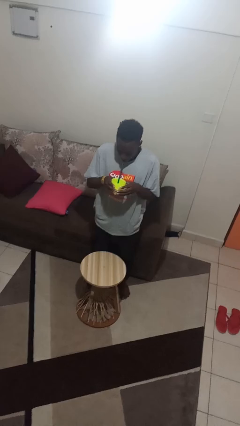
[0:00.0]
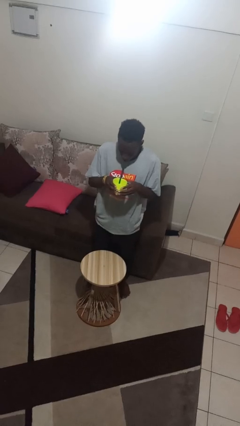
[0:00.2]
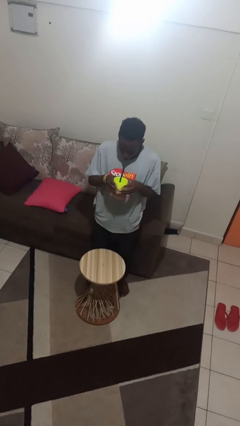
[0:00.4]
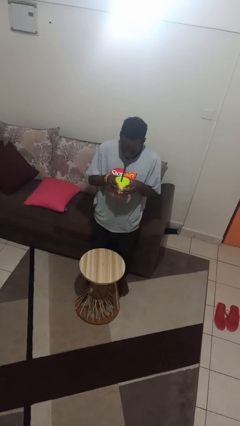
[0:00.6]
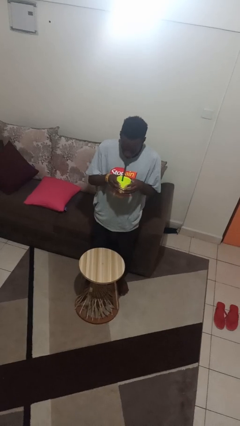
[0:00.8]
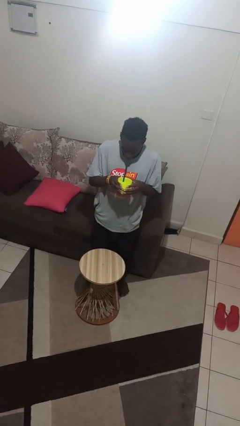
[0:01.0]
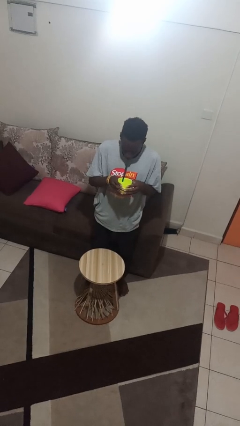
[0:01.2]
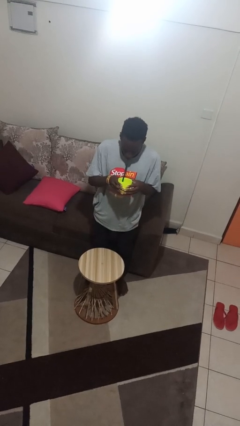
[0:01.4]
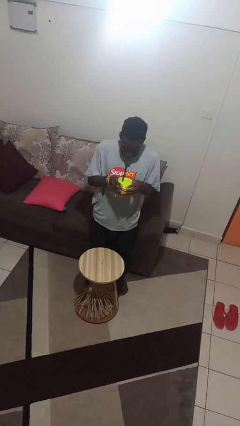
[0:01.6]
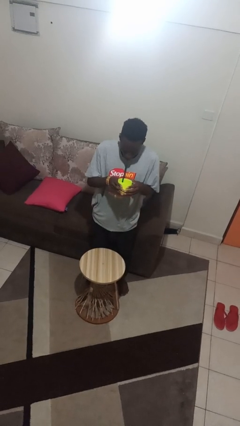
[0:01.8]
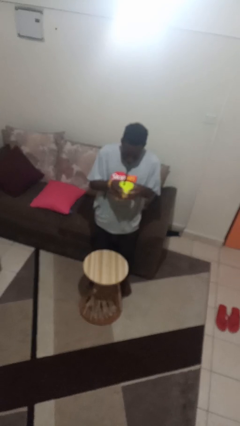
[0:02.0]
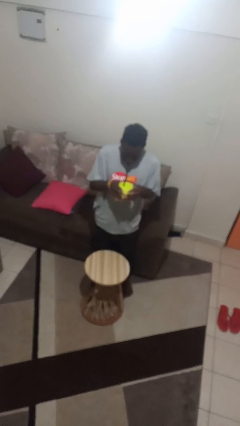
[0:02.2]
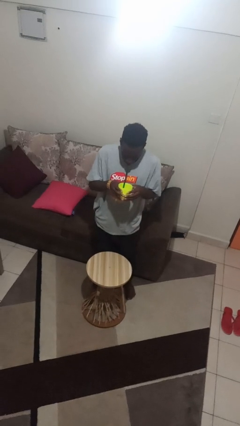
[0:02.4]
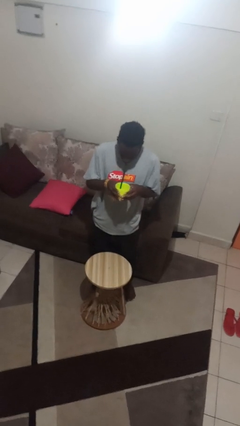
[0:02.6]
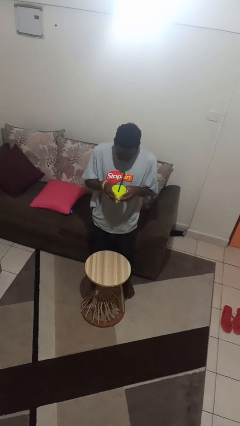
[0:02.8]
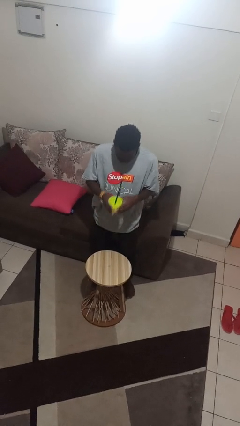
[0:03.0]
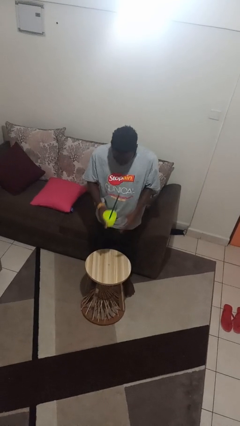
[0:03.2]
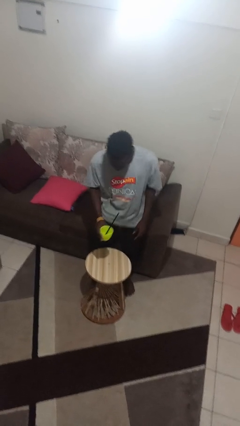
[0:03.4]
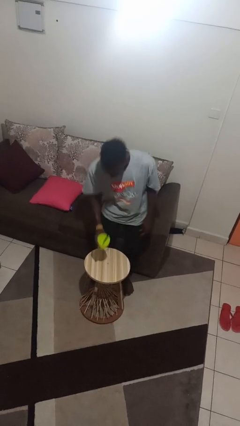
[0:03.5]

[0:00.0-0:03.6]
person drinks from straw

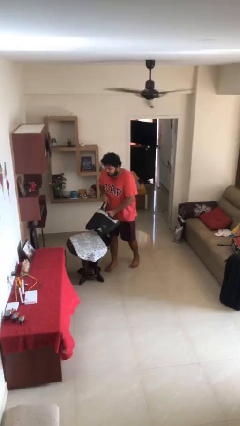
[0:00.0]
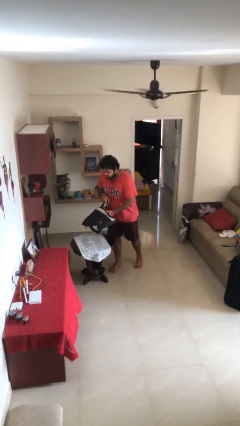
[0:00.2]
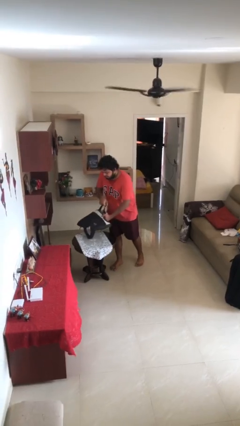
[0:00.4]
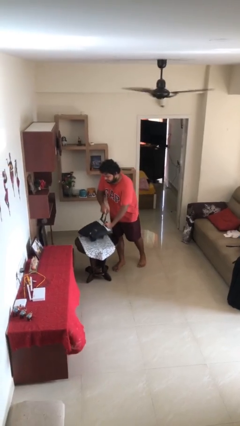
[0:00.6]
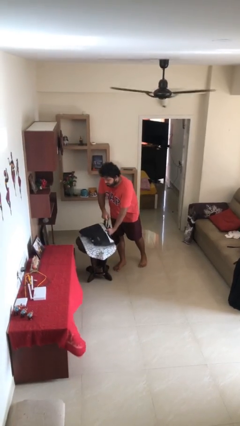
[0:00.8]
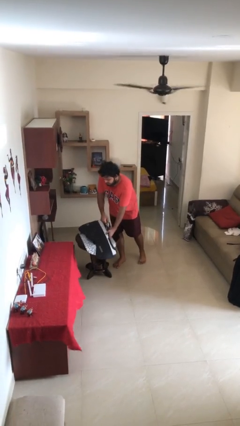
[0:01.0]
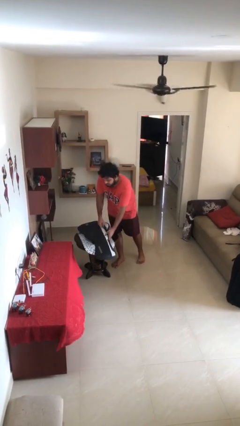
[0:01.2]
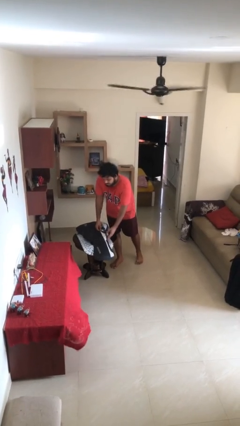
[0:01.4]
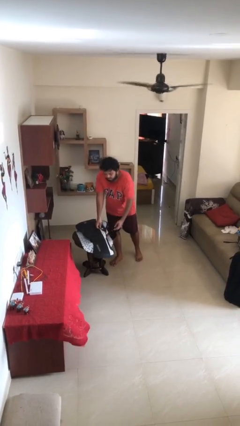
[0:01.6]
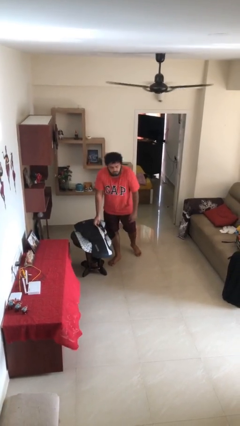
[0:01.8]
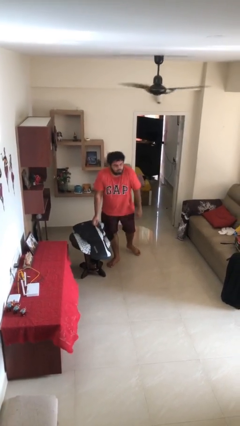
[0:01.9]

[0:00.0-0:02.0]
person puts down object on table

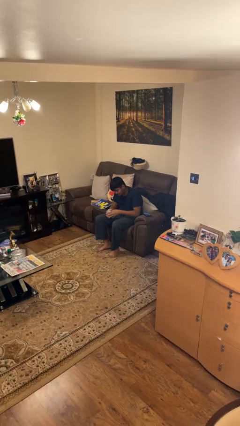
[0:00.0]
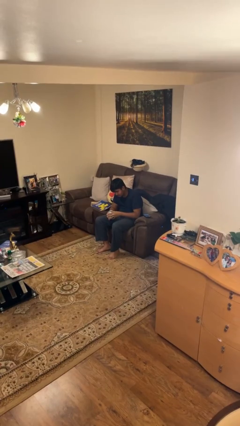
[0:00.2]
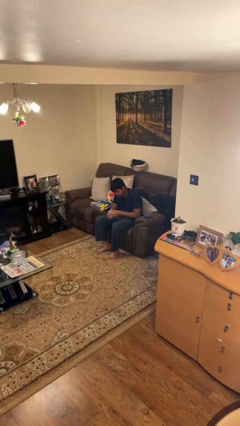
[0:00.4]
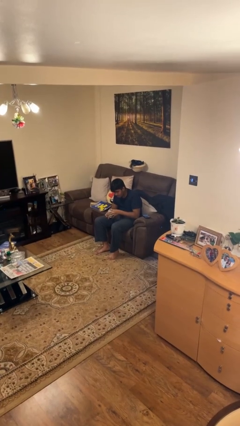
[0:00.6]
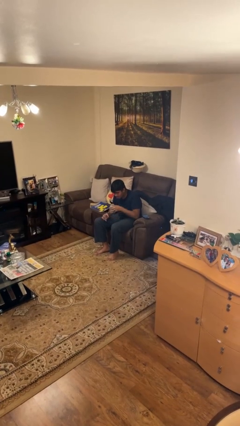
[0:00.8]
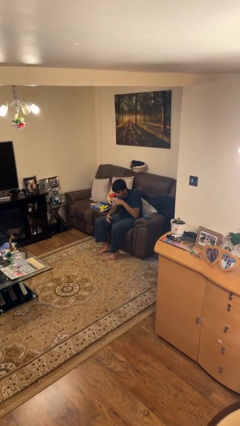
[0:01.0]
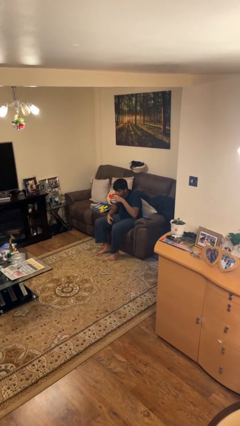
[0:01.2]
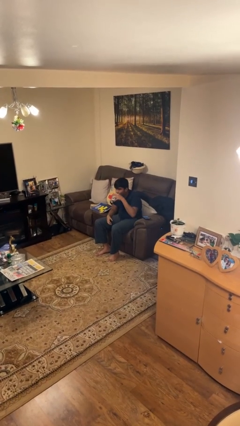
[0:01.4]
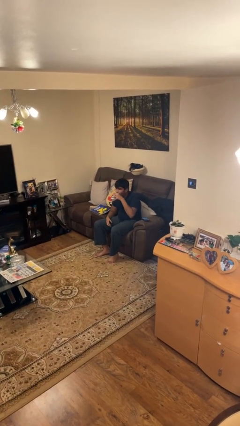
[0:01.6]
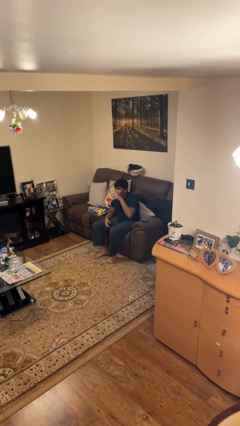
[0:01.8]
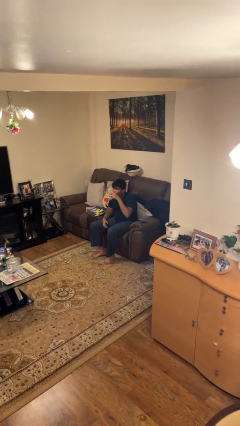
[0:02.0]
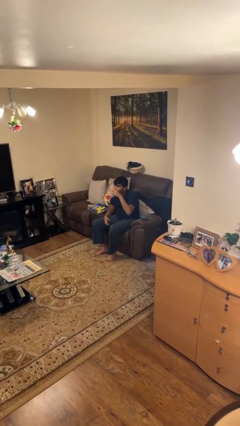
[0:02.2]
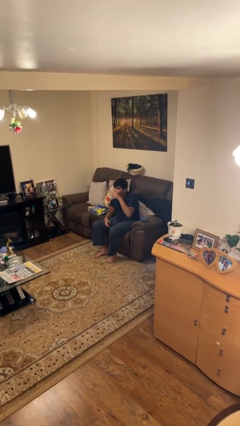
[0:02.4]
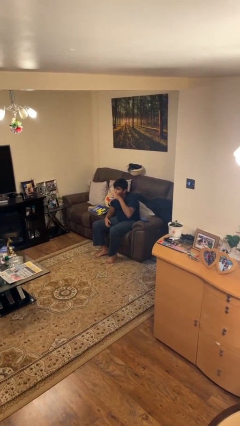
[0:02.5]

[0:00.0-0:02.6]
person drinks from beverage can

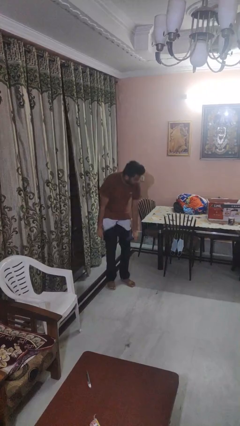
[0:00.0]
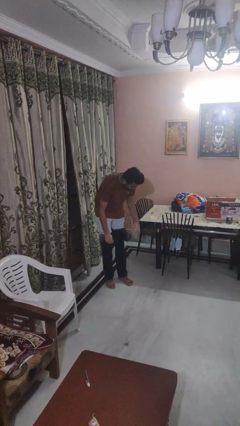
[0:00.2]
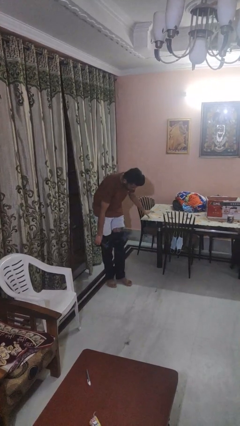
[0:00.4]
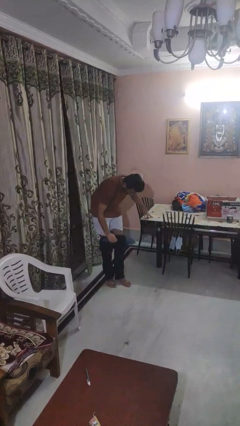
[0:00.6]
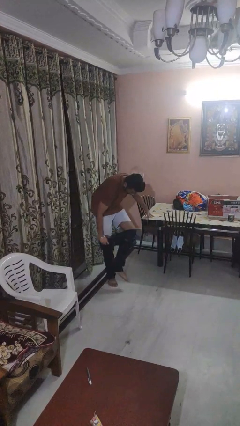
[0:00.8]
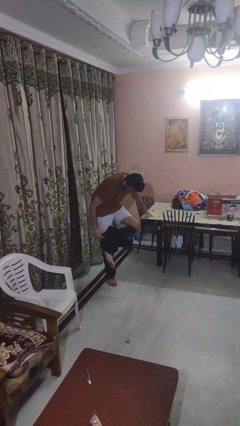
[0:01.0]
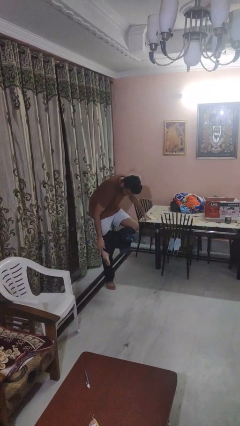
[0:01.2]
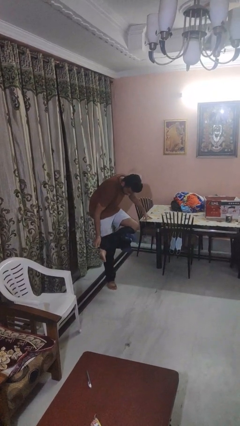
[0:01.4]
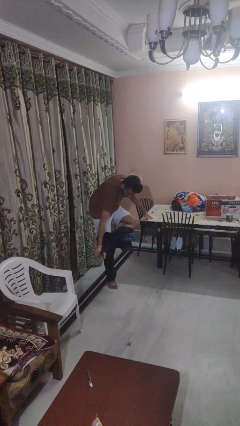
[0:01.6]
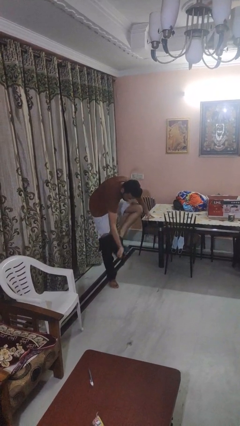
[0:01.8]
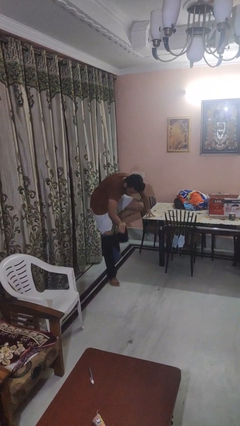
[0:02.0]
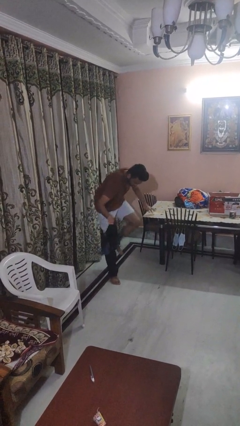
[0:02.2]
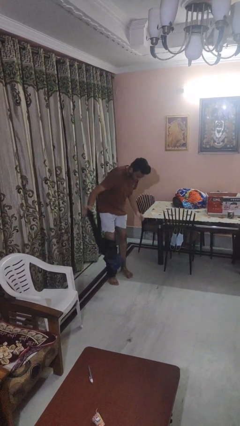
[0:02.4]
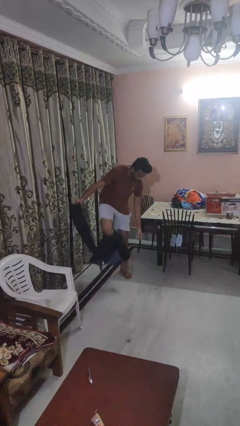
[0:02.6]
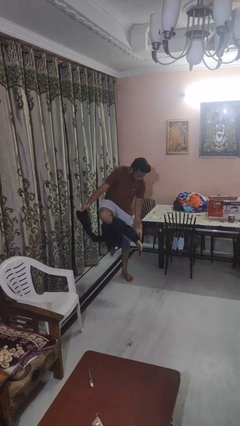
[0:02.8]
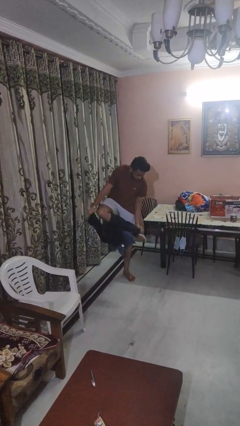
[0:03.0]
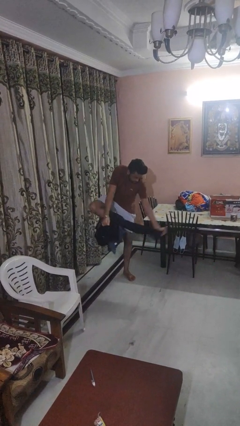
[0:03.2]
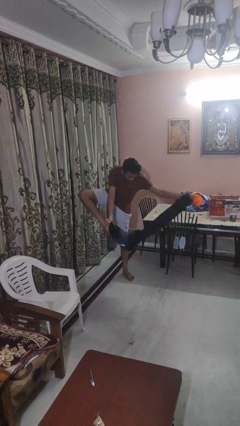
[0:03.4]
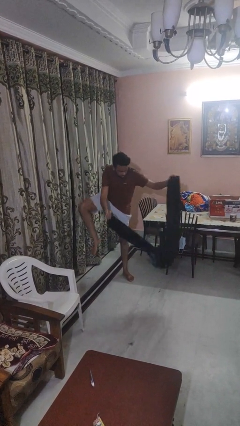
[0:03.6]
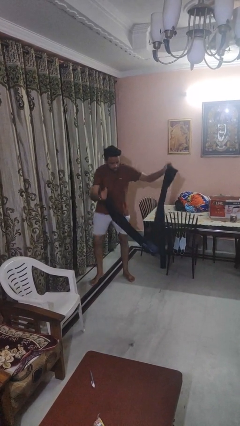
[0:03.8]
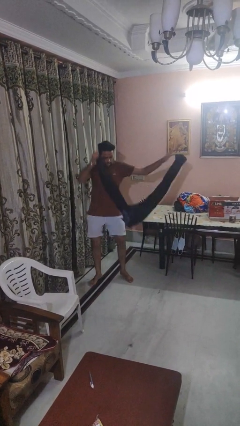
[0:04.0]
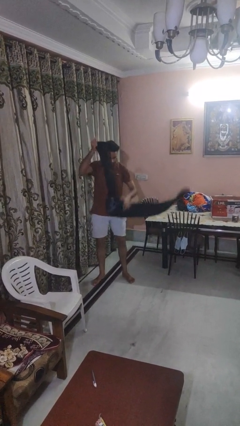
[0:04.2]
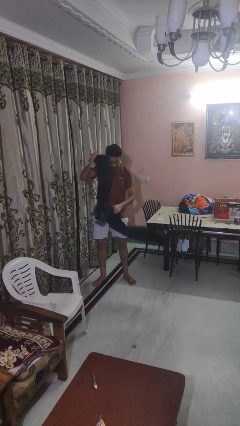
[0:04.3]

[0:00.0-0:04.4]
person takes off pants

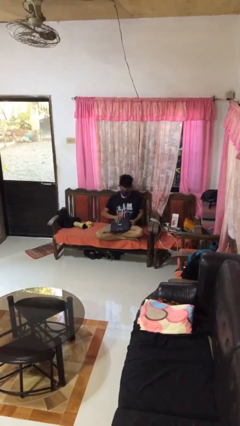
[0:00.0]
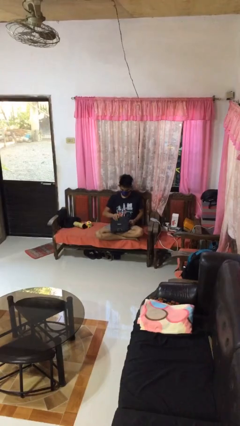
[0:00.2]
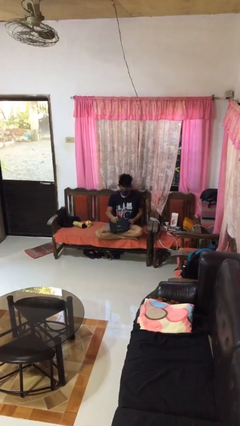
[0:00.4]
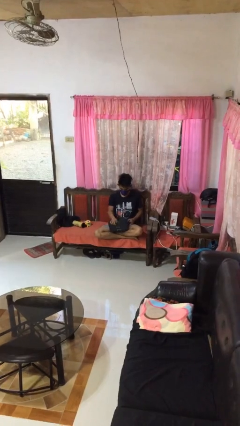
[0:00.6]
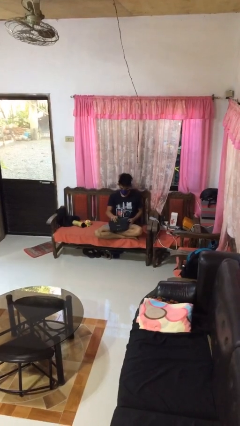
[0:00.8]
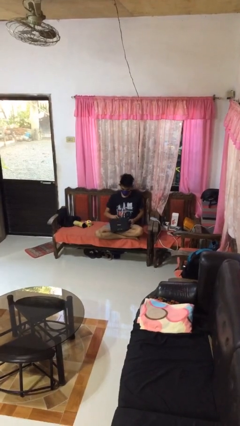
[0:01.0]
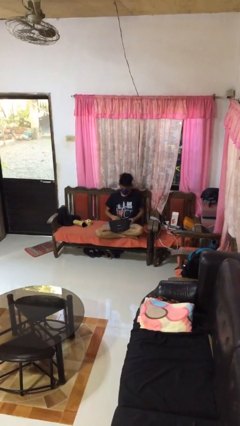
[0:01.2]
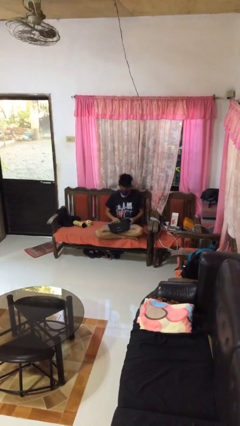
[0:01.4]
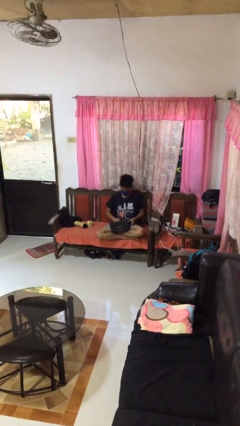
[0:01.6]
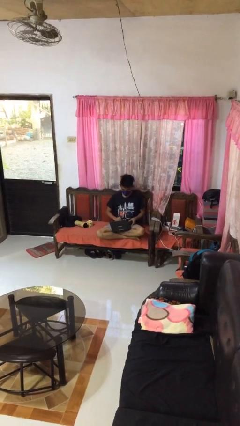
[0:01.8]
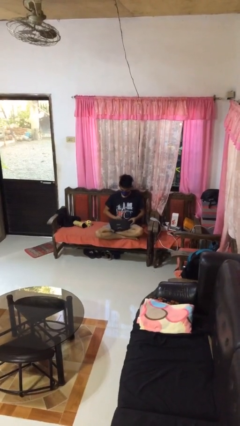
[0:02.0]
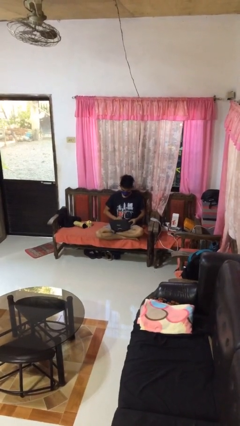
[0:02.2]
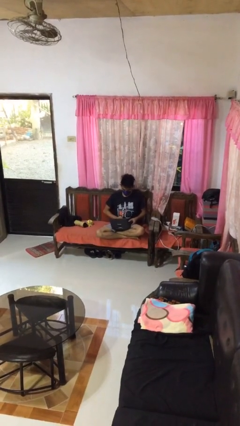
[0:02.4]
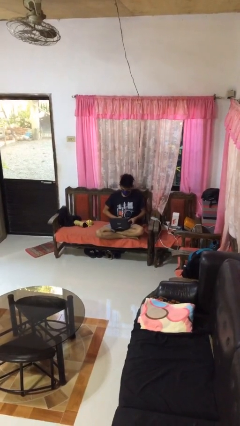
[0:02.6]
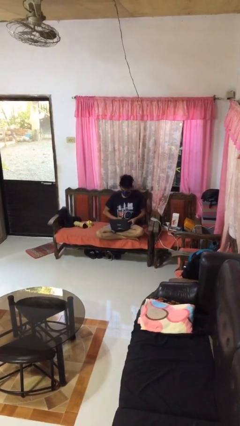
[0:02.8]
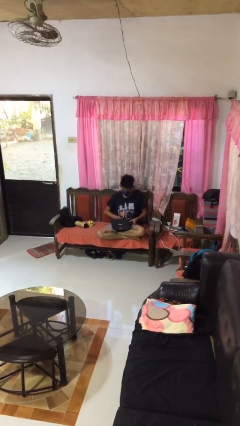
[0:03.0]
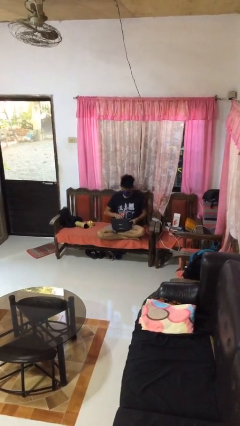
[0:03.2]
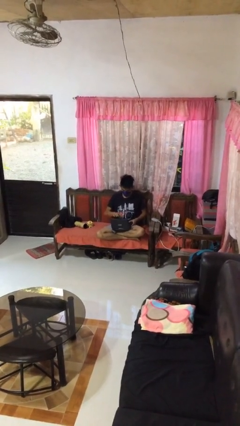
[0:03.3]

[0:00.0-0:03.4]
person opens laptop

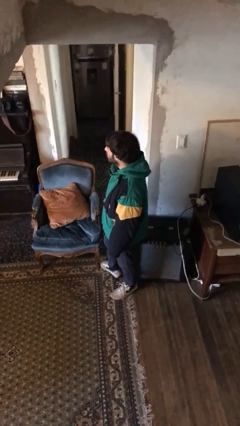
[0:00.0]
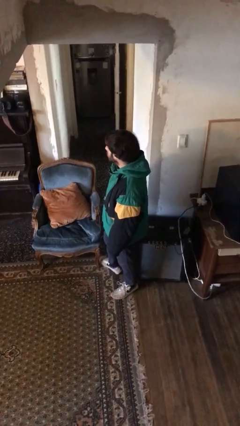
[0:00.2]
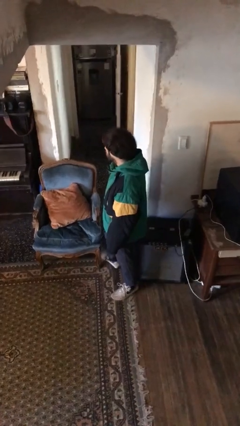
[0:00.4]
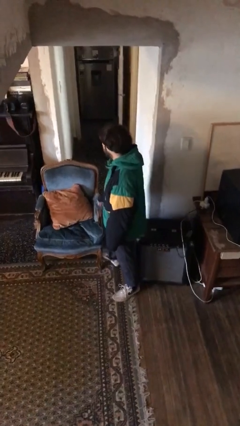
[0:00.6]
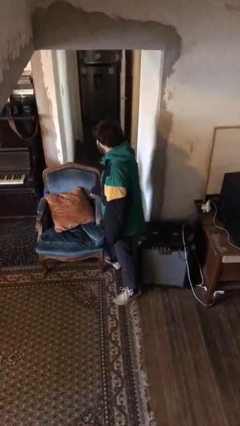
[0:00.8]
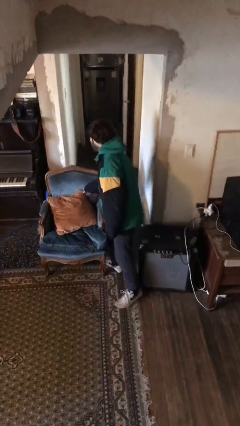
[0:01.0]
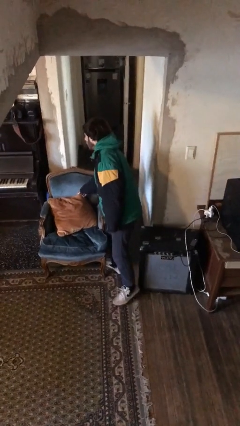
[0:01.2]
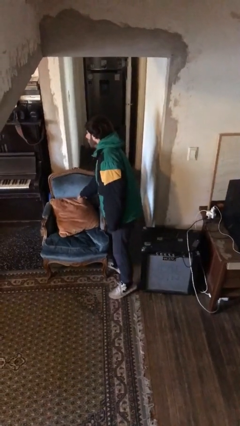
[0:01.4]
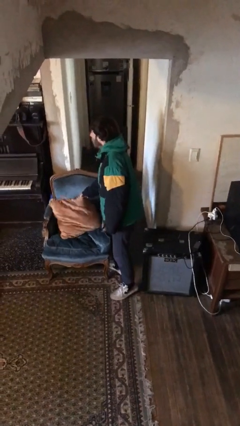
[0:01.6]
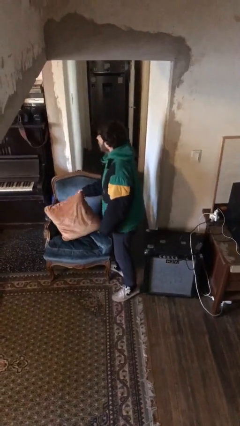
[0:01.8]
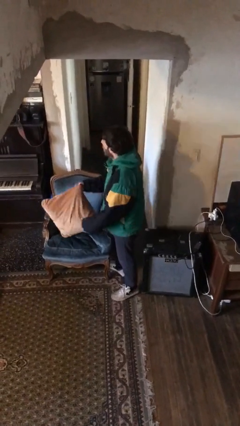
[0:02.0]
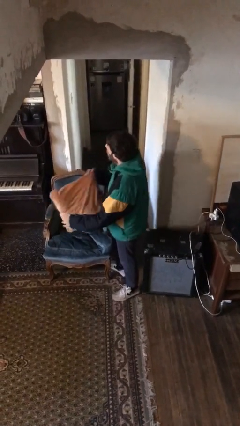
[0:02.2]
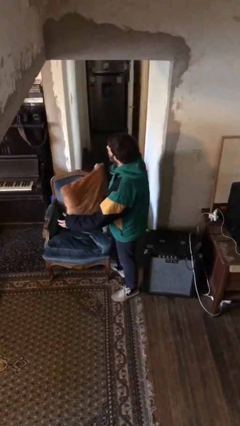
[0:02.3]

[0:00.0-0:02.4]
person picks up object from couch
